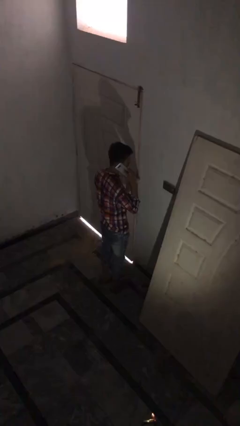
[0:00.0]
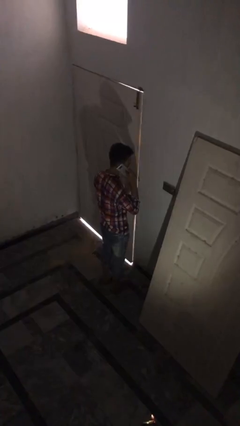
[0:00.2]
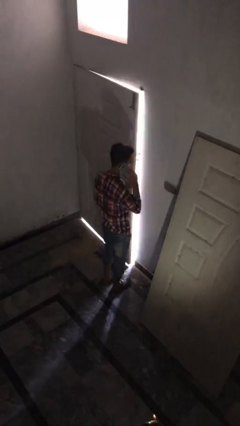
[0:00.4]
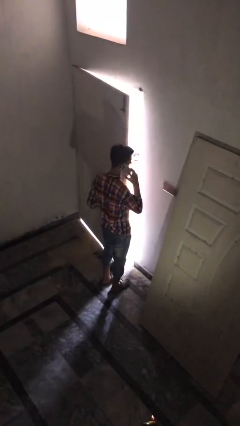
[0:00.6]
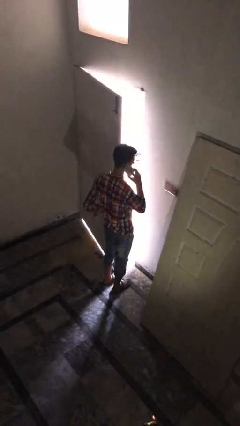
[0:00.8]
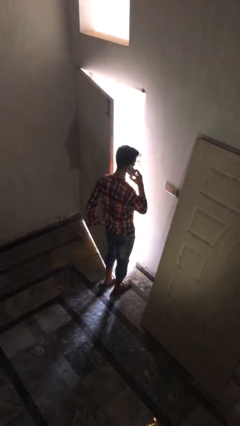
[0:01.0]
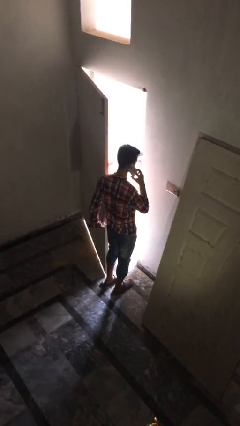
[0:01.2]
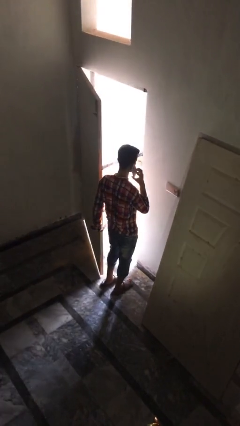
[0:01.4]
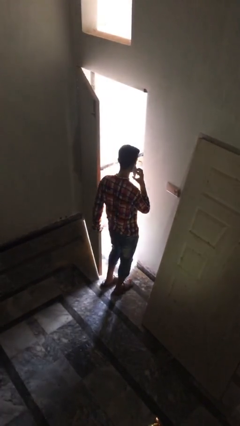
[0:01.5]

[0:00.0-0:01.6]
person opens facility door

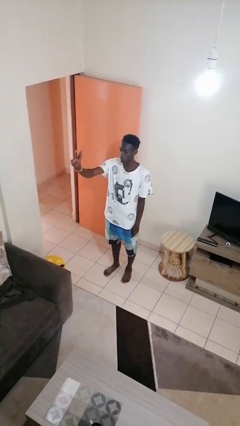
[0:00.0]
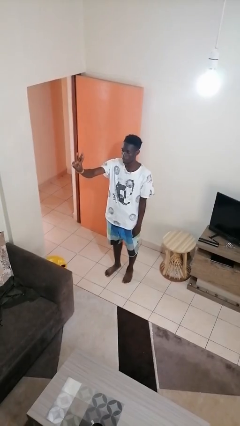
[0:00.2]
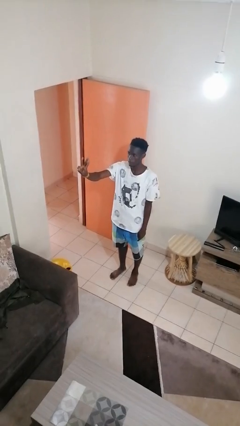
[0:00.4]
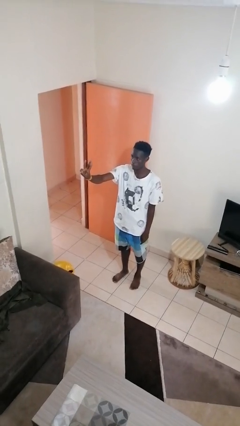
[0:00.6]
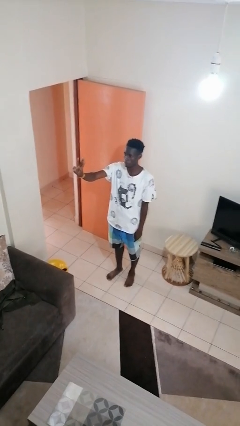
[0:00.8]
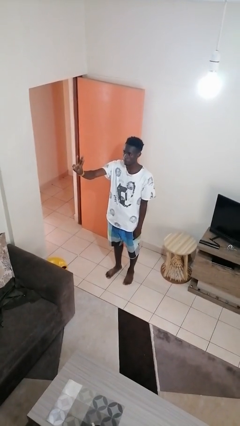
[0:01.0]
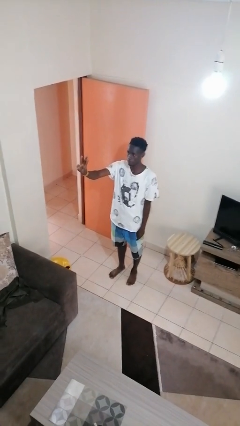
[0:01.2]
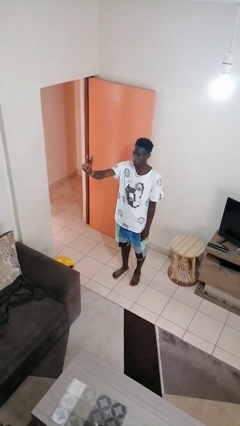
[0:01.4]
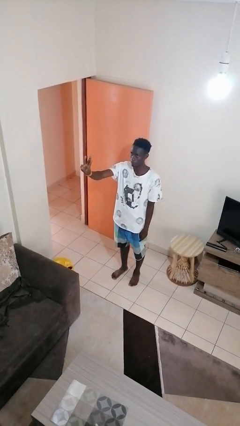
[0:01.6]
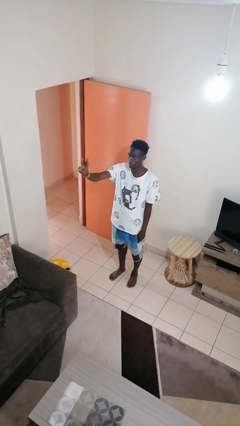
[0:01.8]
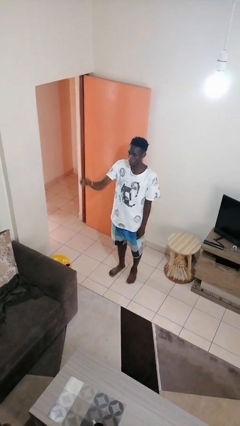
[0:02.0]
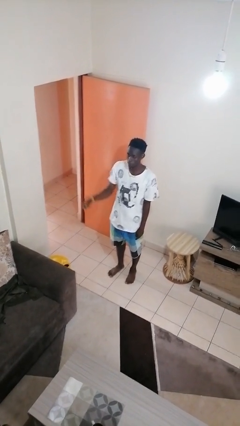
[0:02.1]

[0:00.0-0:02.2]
person gestures number three

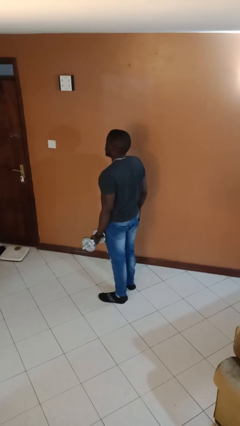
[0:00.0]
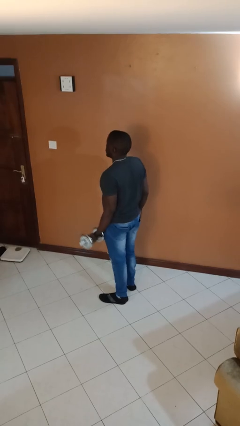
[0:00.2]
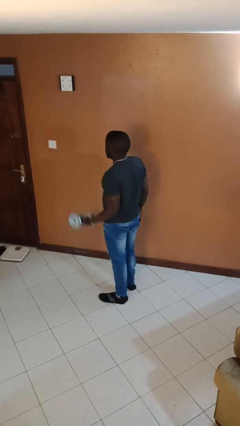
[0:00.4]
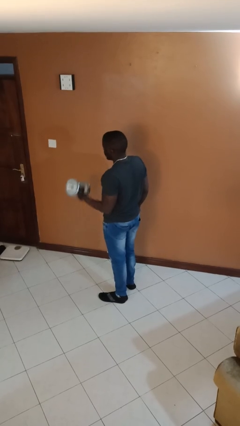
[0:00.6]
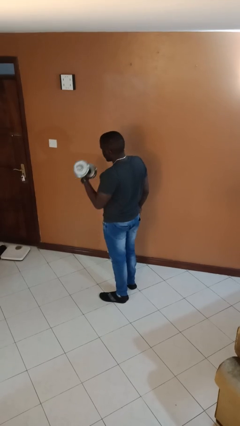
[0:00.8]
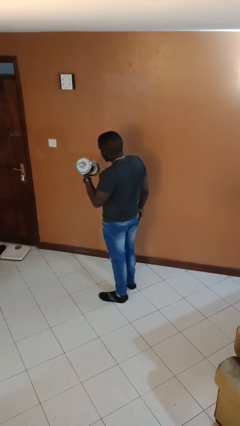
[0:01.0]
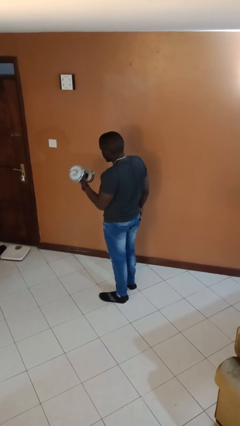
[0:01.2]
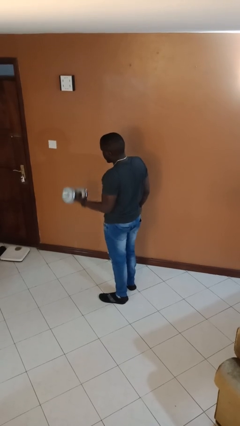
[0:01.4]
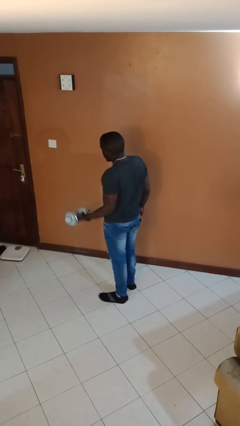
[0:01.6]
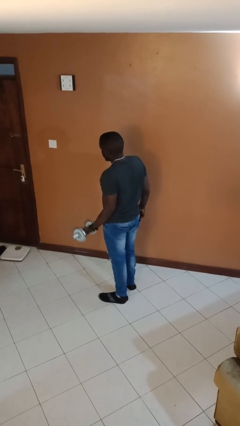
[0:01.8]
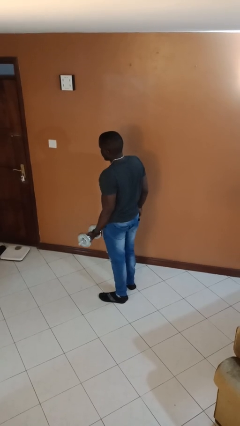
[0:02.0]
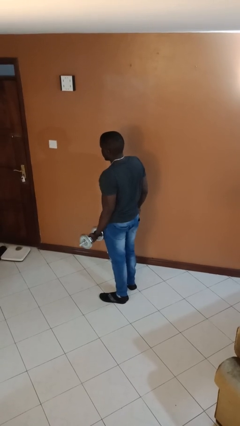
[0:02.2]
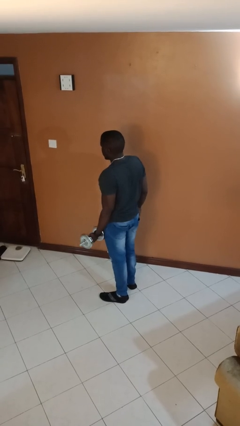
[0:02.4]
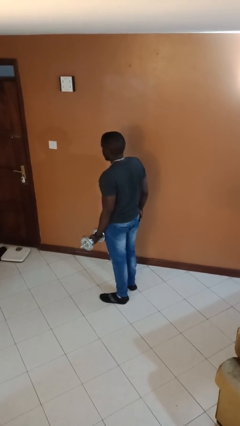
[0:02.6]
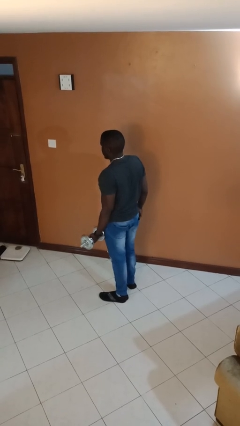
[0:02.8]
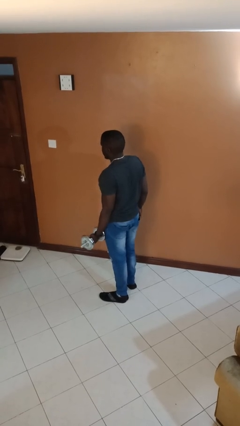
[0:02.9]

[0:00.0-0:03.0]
person lifts dumbbells

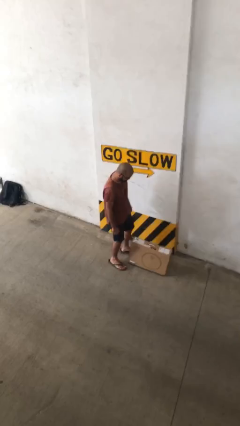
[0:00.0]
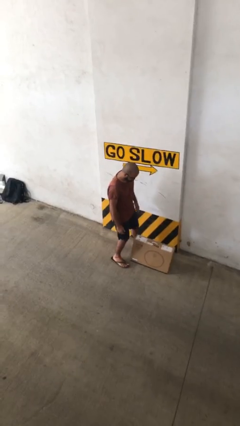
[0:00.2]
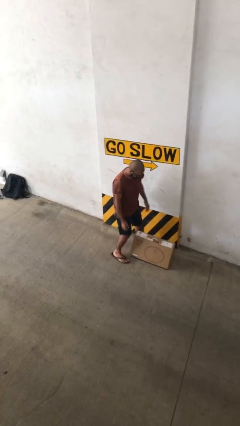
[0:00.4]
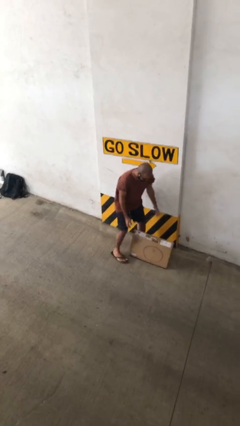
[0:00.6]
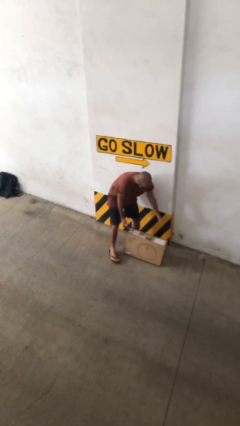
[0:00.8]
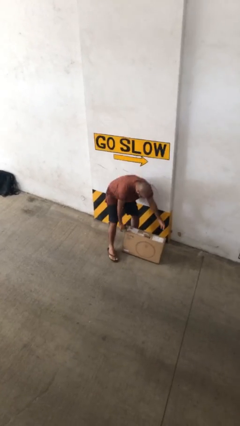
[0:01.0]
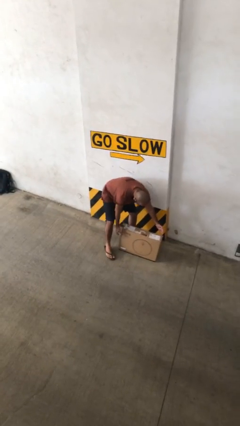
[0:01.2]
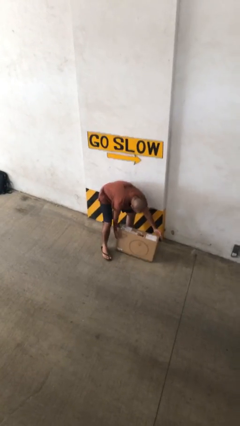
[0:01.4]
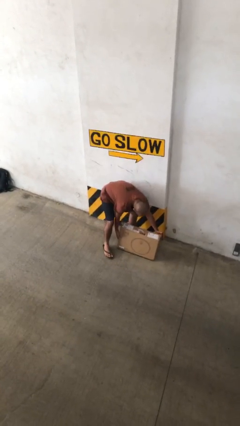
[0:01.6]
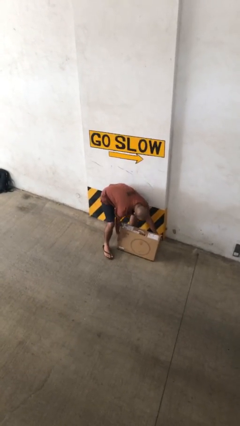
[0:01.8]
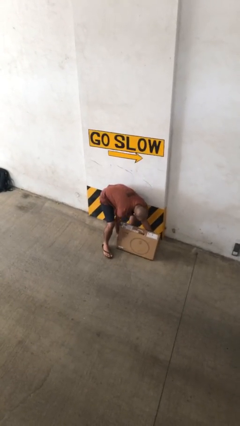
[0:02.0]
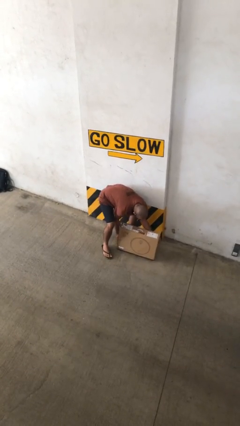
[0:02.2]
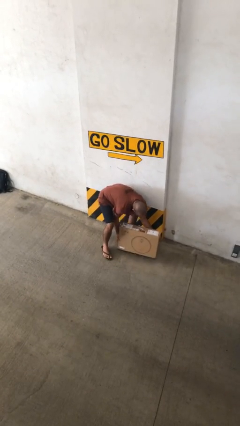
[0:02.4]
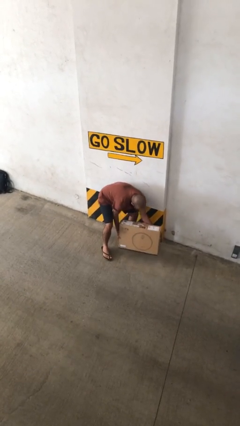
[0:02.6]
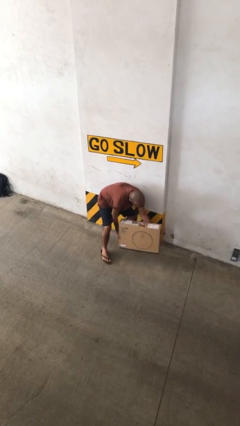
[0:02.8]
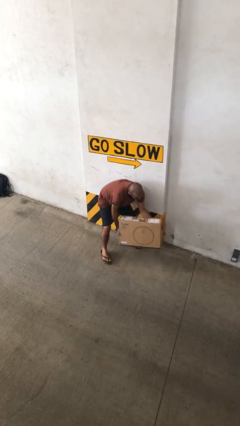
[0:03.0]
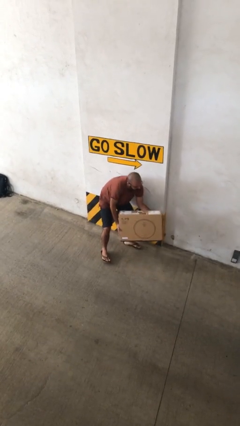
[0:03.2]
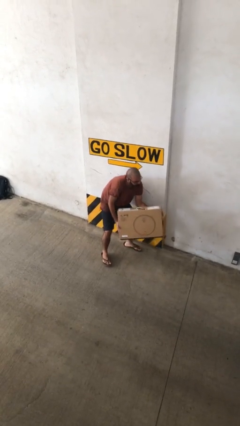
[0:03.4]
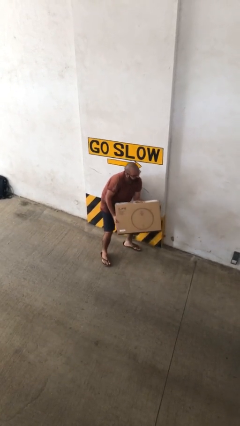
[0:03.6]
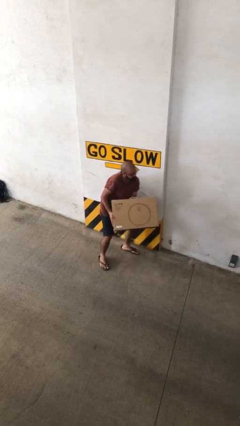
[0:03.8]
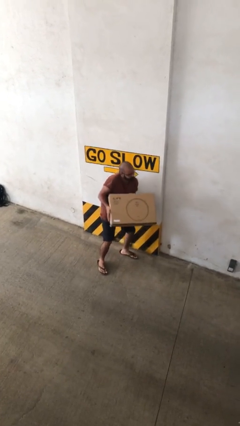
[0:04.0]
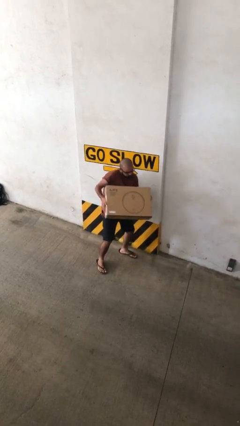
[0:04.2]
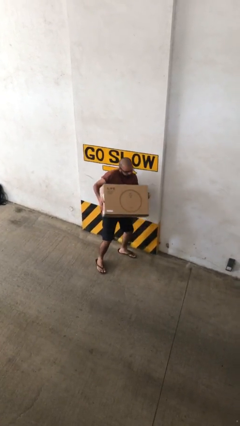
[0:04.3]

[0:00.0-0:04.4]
person picks up object from floor

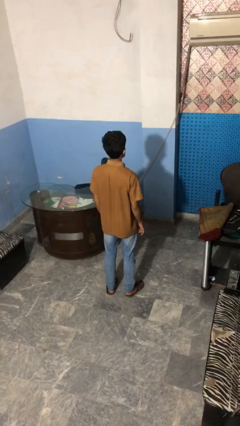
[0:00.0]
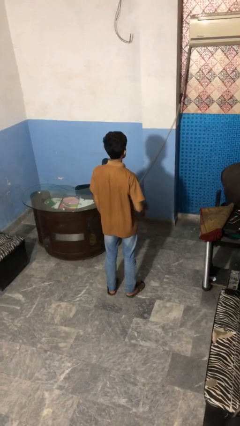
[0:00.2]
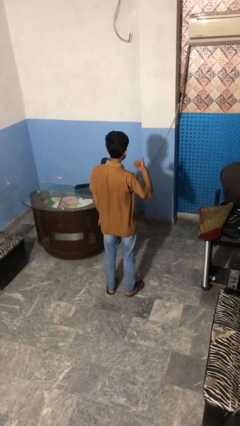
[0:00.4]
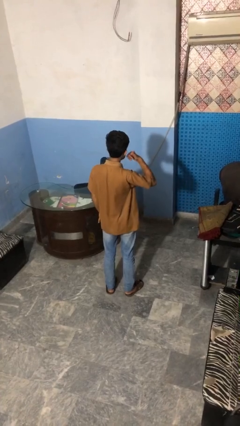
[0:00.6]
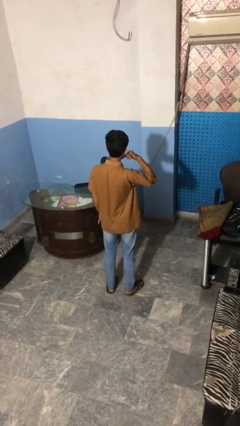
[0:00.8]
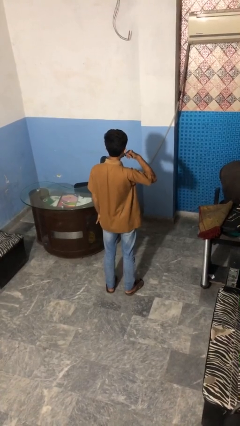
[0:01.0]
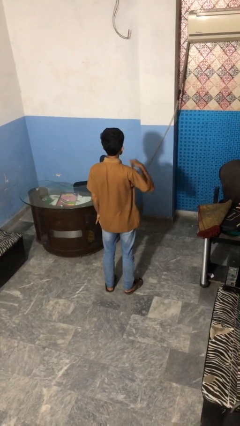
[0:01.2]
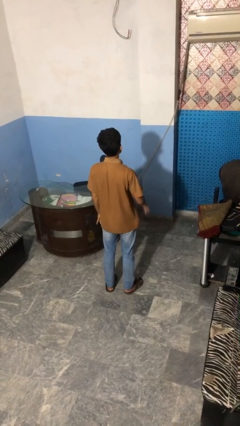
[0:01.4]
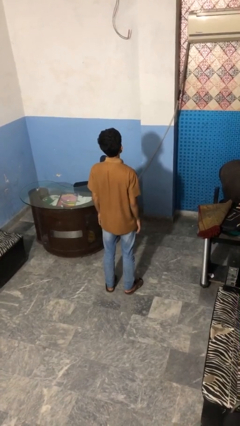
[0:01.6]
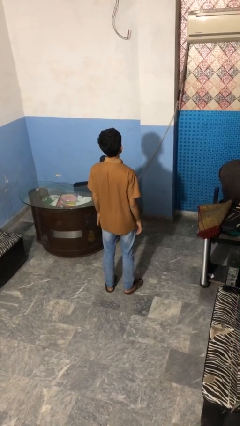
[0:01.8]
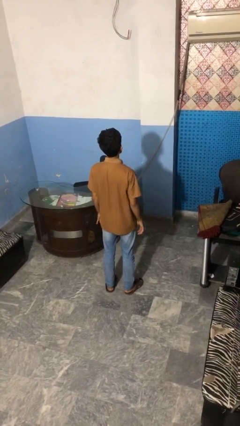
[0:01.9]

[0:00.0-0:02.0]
person gestures call me

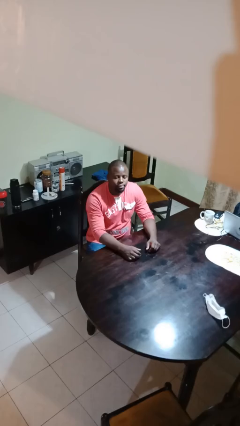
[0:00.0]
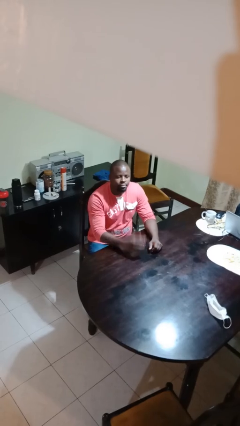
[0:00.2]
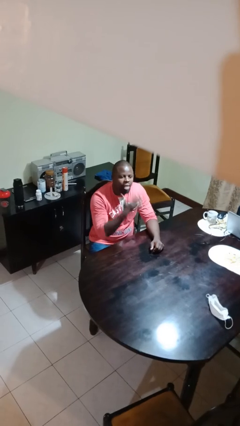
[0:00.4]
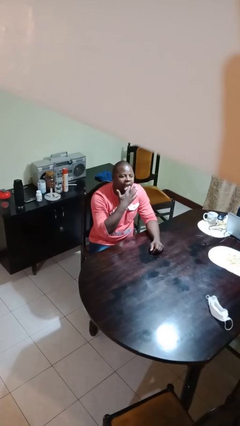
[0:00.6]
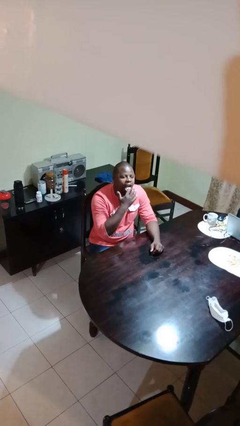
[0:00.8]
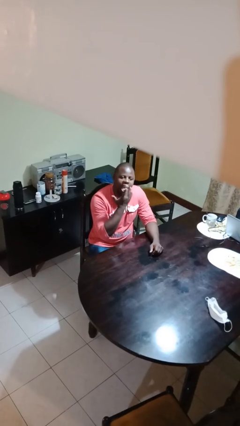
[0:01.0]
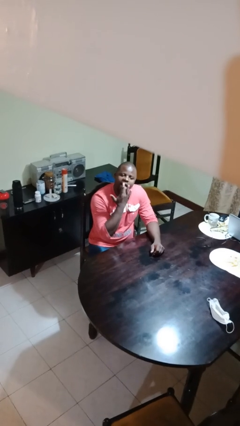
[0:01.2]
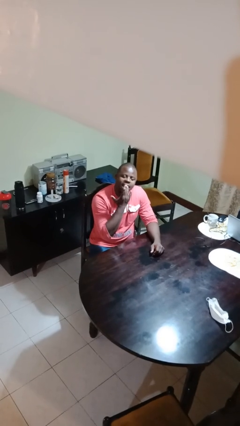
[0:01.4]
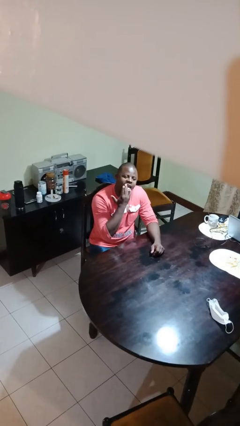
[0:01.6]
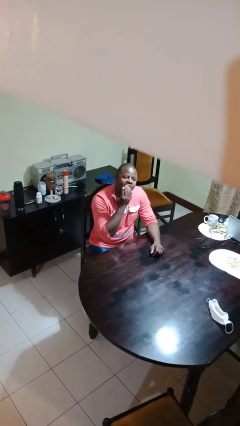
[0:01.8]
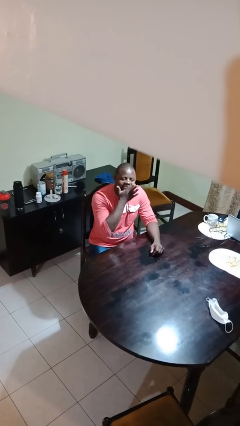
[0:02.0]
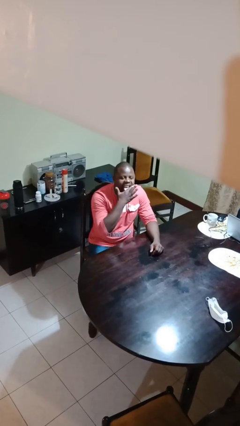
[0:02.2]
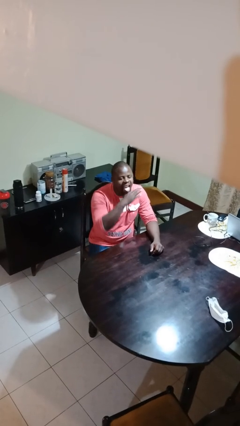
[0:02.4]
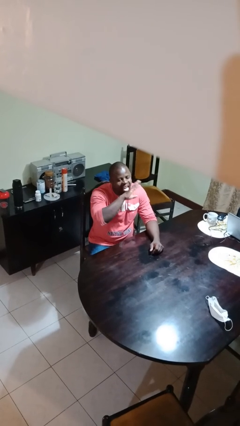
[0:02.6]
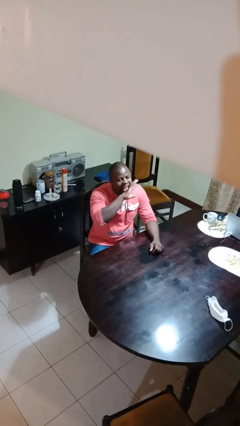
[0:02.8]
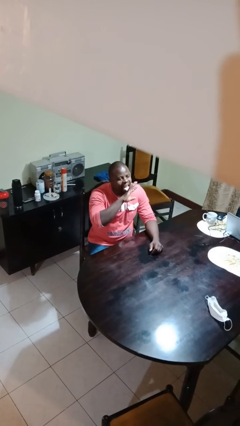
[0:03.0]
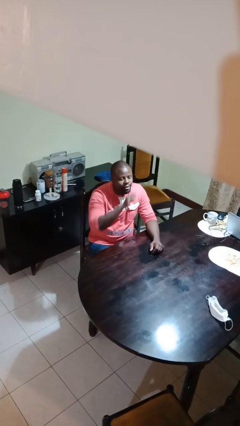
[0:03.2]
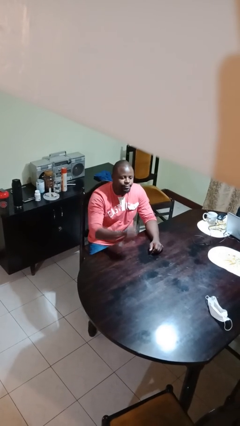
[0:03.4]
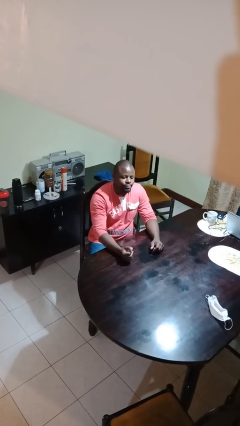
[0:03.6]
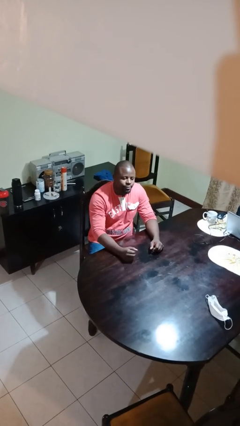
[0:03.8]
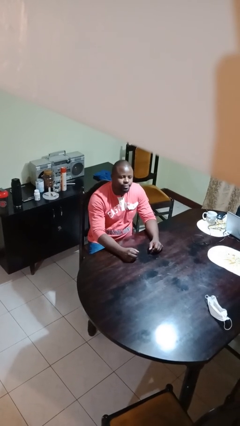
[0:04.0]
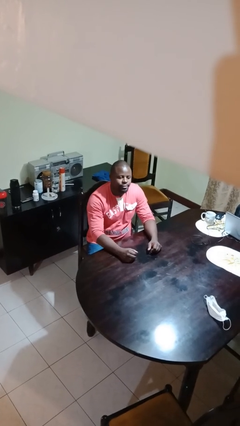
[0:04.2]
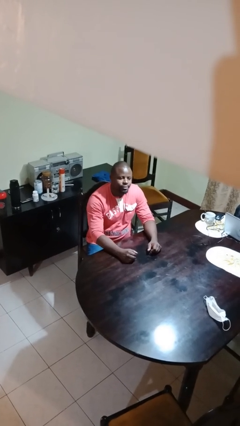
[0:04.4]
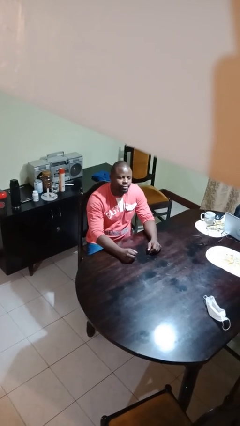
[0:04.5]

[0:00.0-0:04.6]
person licks fingers
